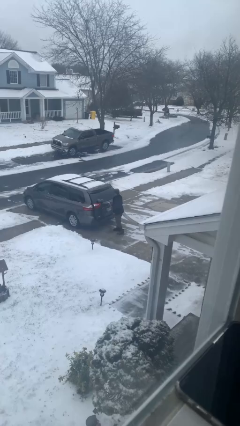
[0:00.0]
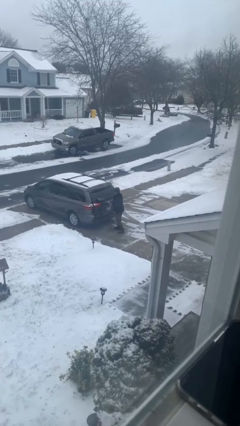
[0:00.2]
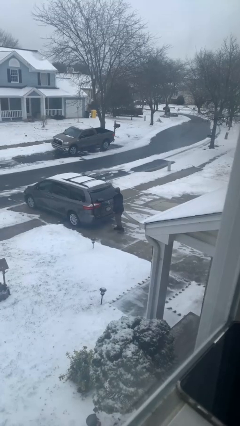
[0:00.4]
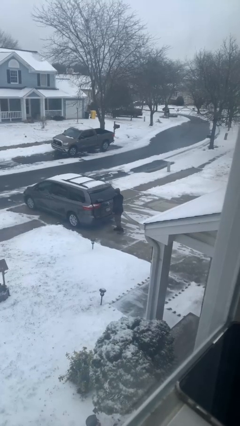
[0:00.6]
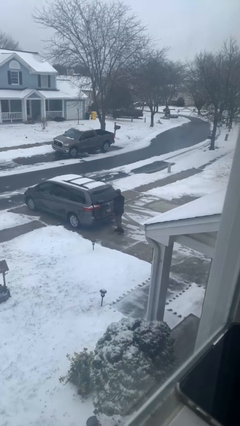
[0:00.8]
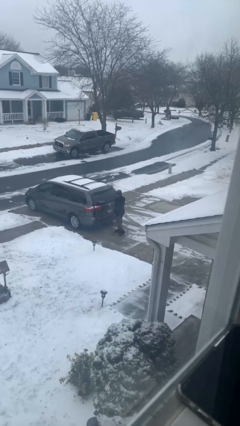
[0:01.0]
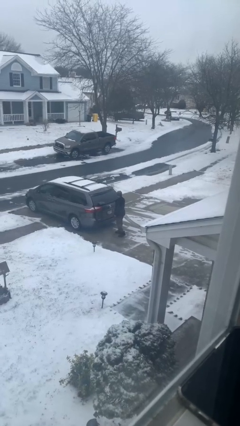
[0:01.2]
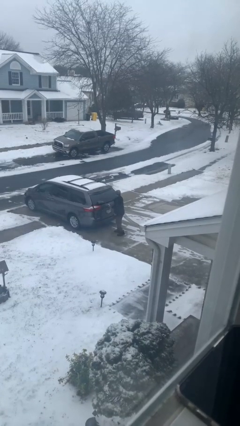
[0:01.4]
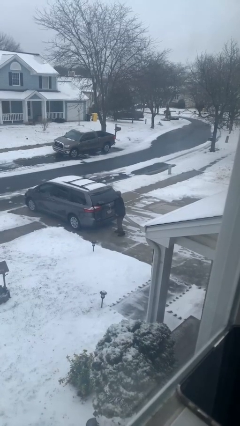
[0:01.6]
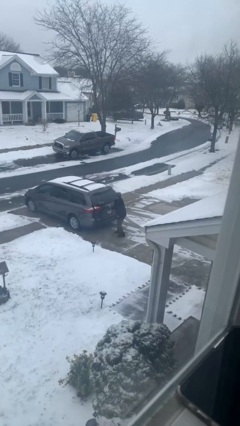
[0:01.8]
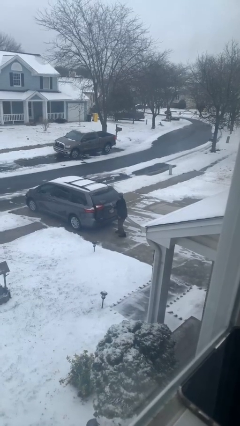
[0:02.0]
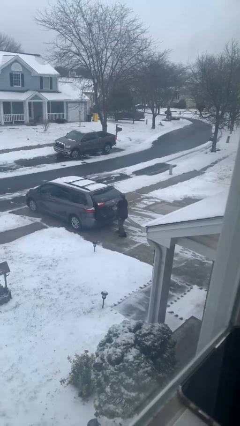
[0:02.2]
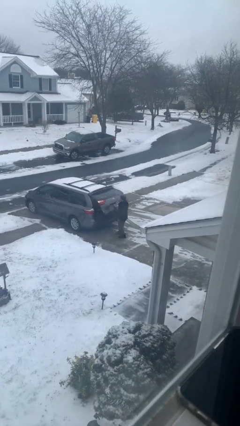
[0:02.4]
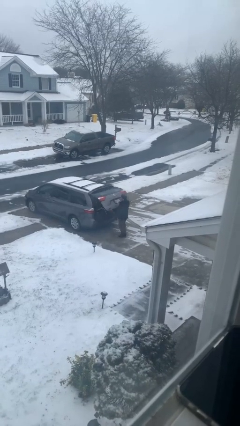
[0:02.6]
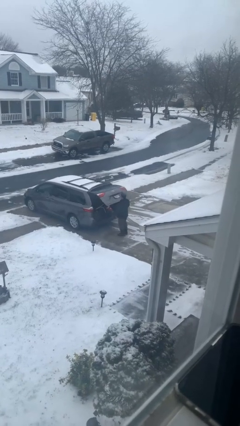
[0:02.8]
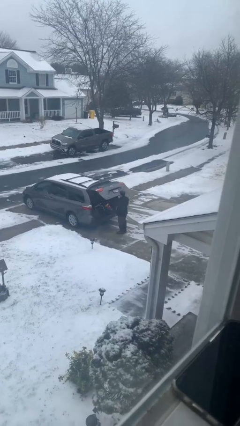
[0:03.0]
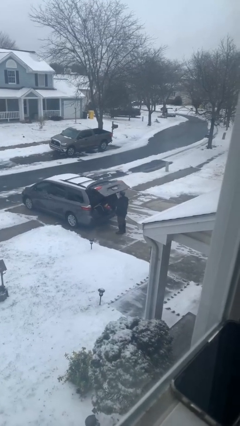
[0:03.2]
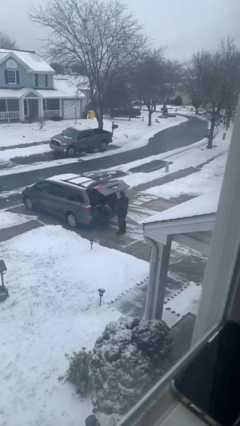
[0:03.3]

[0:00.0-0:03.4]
person opens car trunk

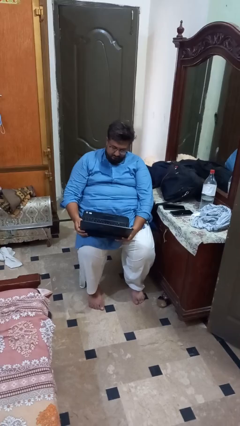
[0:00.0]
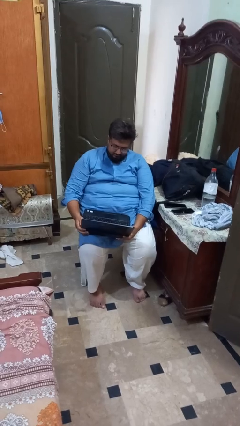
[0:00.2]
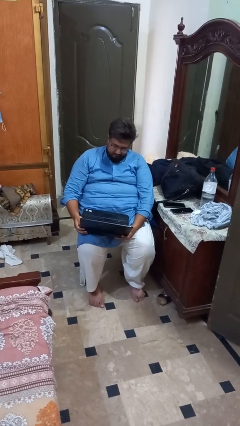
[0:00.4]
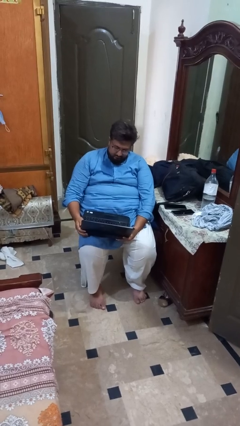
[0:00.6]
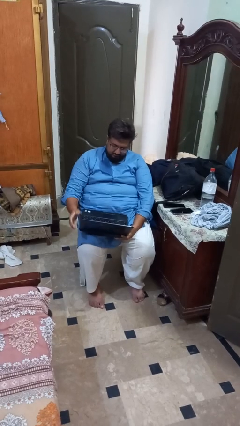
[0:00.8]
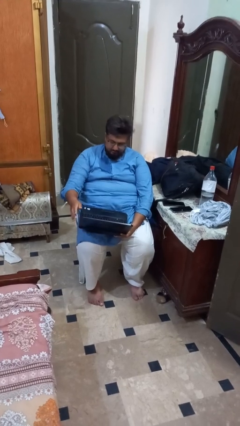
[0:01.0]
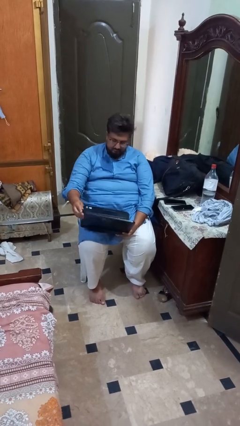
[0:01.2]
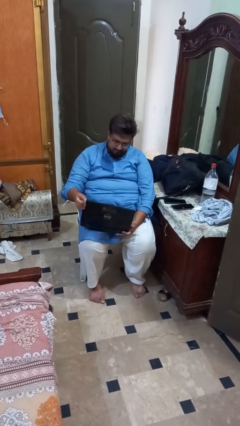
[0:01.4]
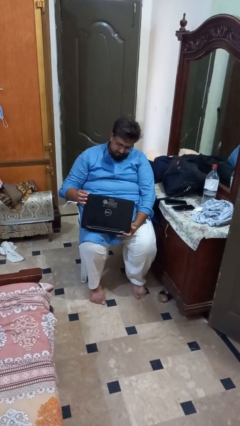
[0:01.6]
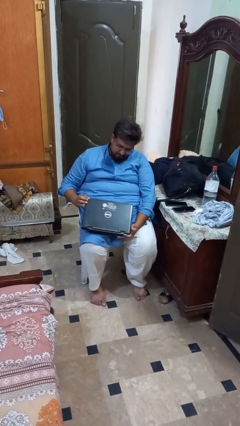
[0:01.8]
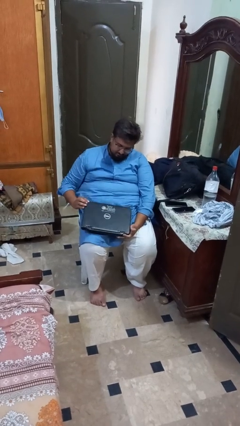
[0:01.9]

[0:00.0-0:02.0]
person closes laptop

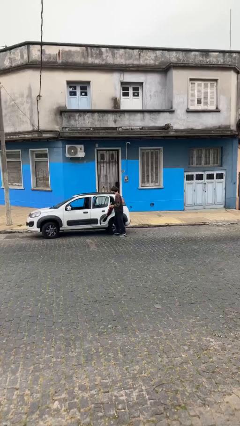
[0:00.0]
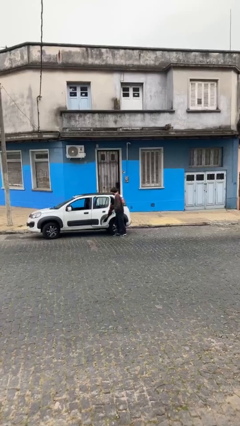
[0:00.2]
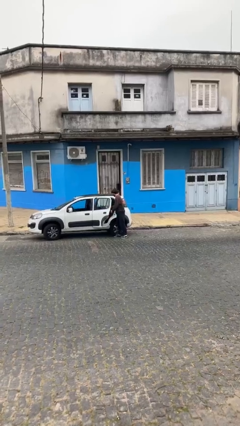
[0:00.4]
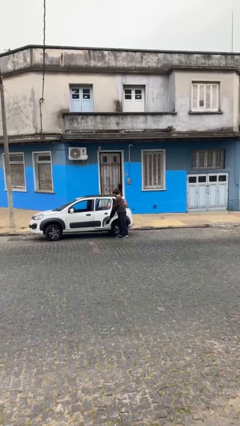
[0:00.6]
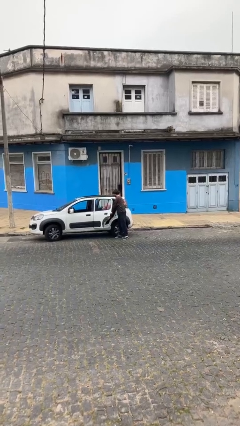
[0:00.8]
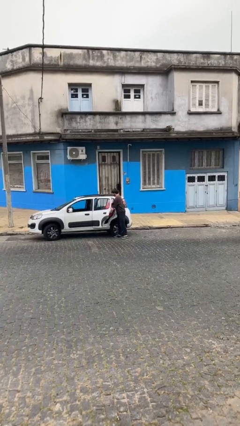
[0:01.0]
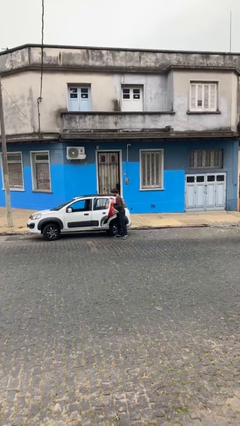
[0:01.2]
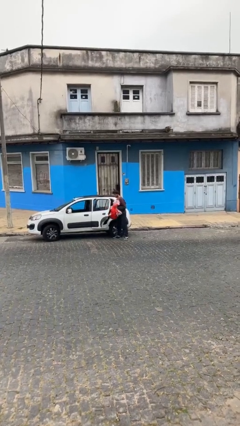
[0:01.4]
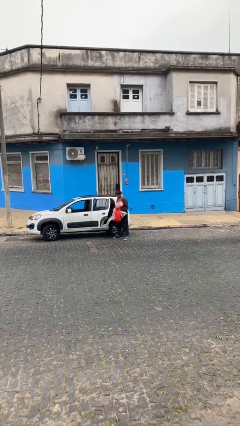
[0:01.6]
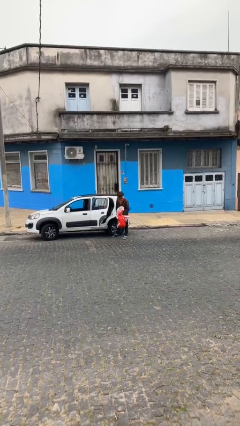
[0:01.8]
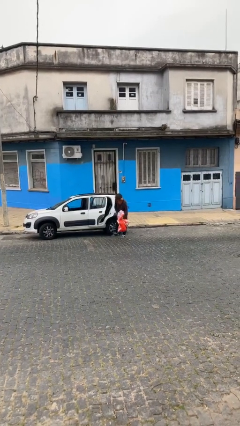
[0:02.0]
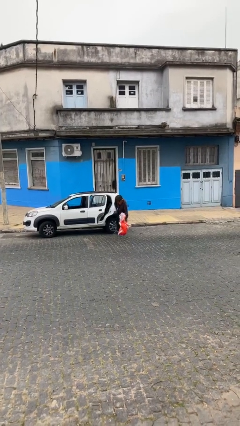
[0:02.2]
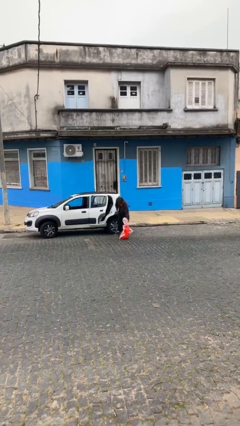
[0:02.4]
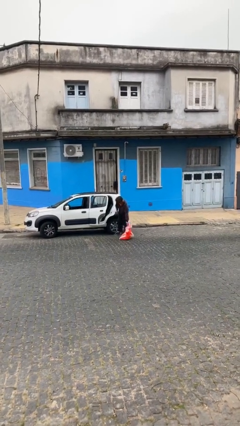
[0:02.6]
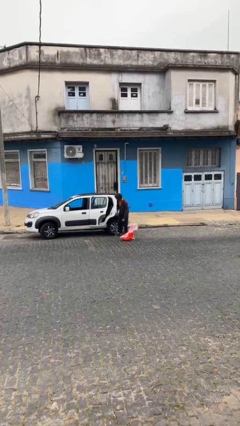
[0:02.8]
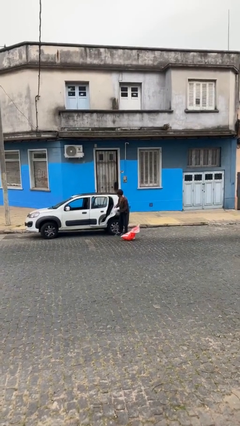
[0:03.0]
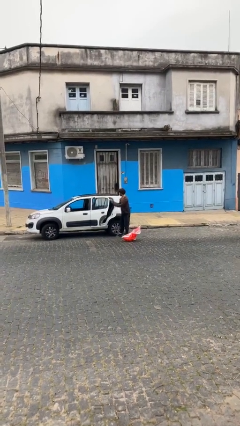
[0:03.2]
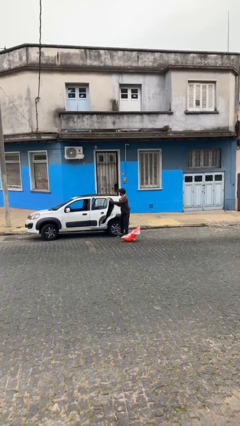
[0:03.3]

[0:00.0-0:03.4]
person unloads car

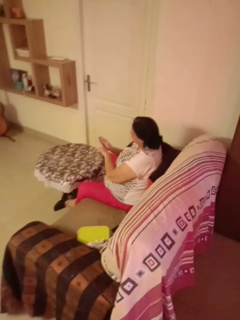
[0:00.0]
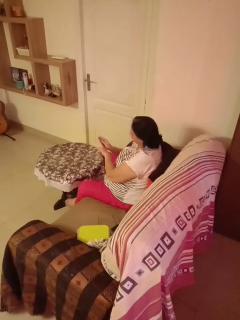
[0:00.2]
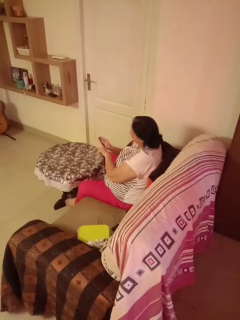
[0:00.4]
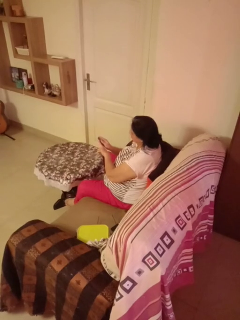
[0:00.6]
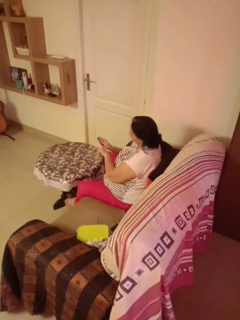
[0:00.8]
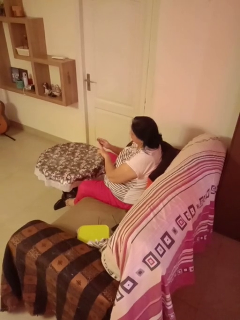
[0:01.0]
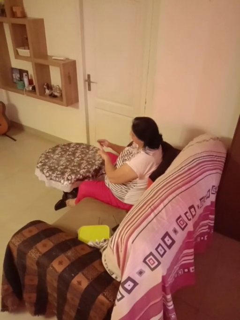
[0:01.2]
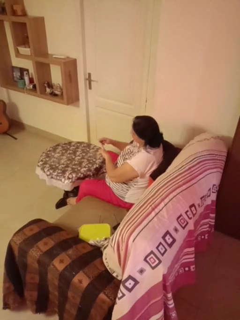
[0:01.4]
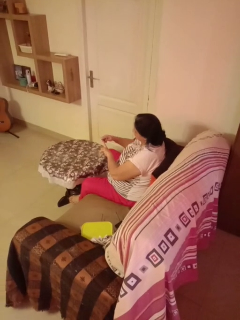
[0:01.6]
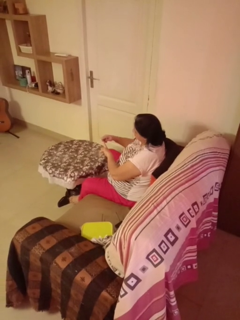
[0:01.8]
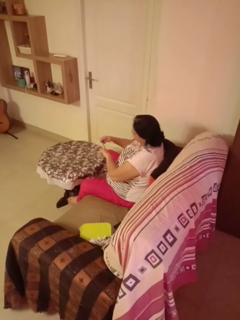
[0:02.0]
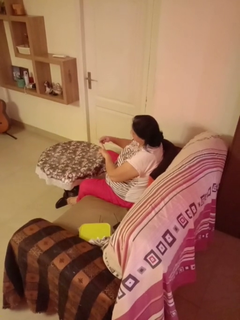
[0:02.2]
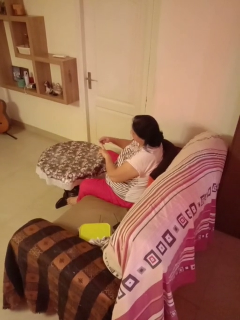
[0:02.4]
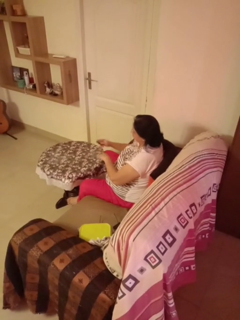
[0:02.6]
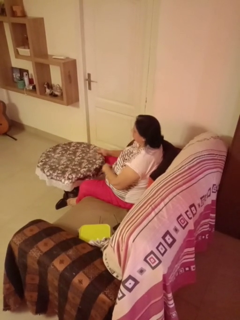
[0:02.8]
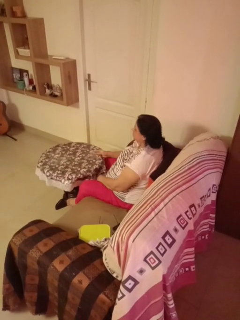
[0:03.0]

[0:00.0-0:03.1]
person files fingernails

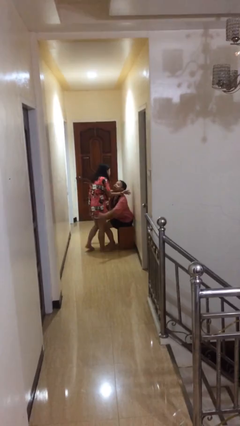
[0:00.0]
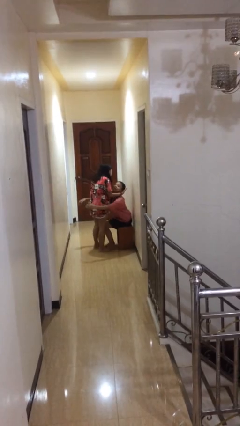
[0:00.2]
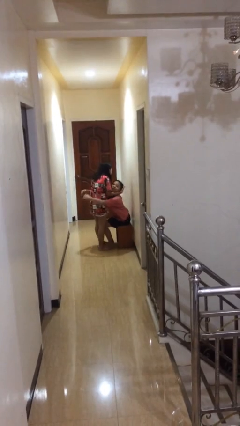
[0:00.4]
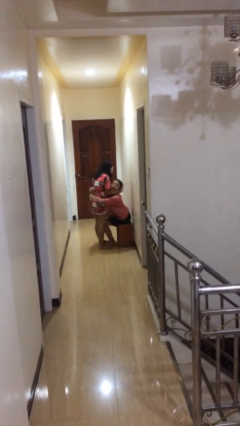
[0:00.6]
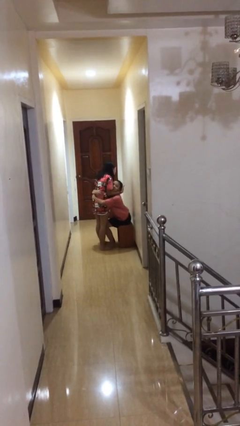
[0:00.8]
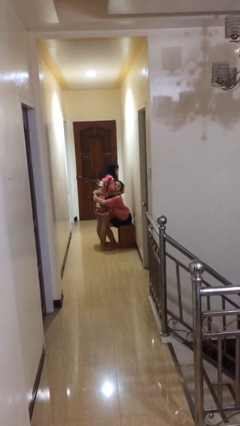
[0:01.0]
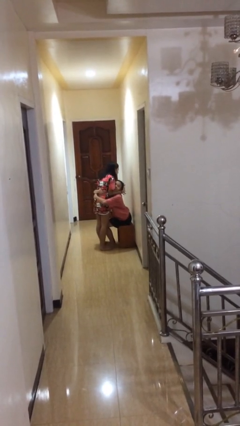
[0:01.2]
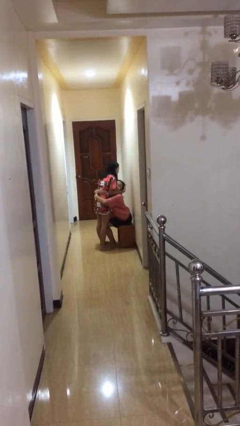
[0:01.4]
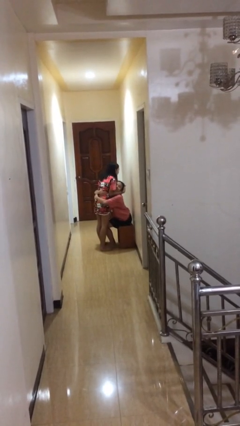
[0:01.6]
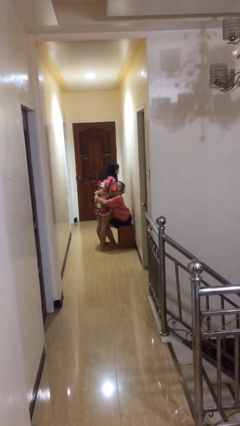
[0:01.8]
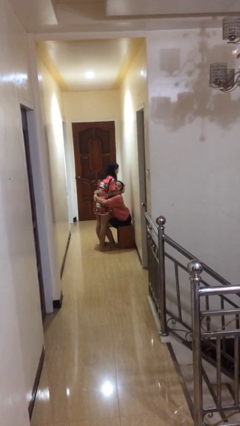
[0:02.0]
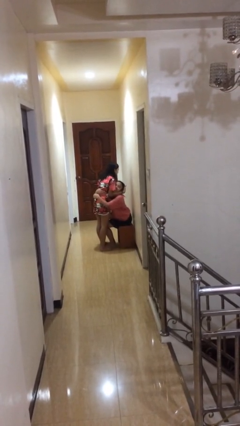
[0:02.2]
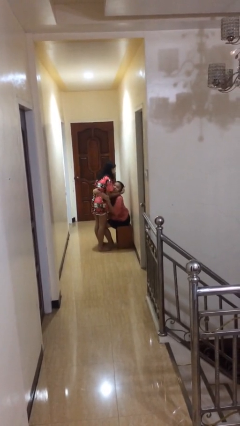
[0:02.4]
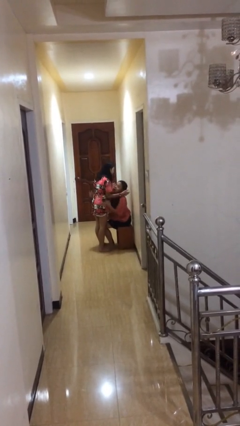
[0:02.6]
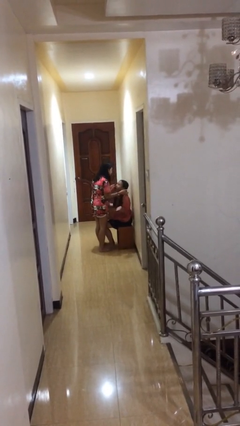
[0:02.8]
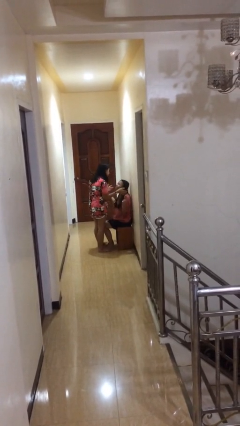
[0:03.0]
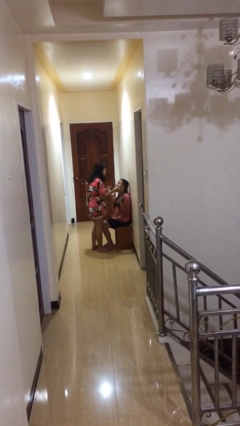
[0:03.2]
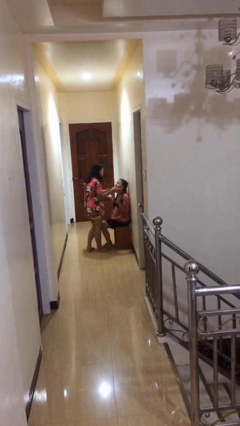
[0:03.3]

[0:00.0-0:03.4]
person embraces person

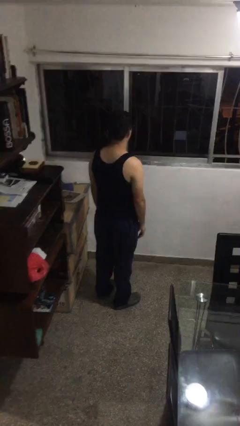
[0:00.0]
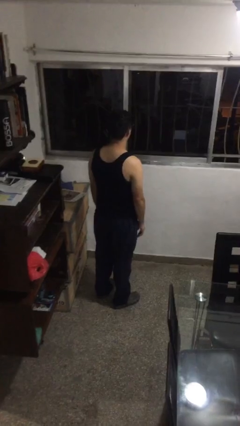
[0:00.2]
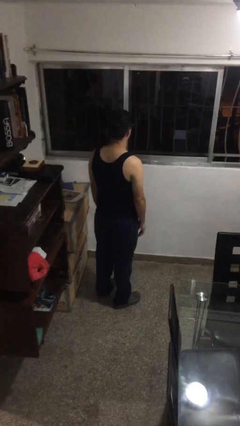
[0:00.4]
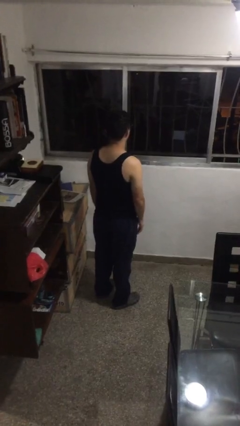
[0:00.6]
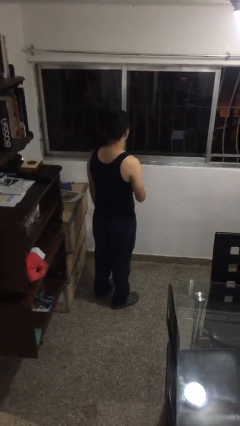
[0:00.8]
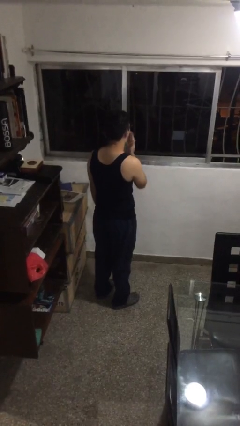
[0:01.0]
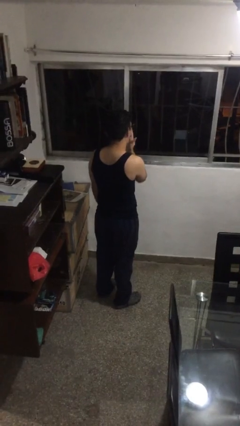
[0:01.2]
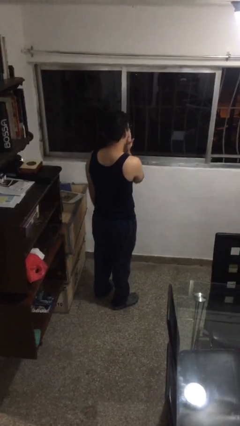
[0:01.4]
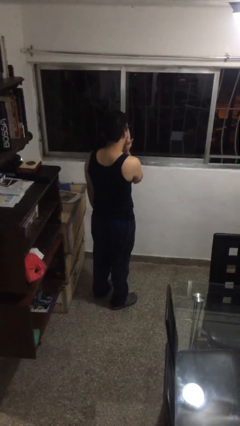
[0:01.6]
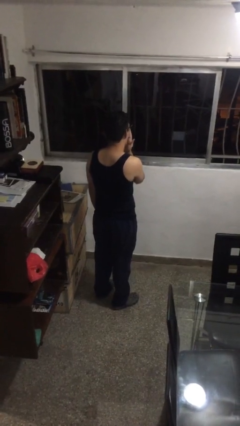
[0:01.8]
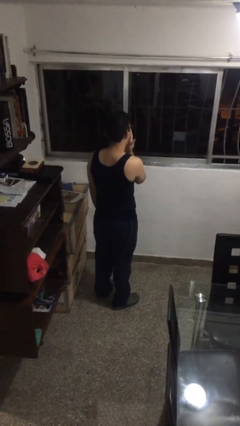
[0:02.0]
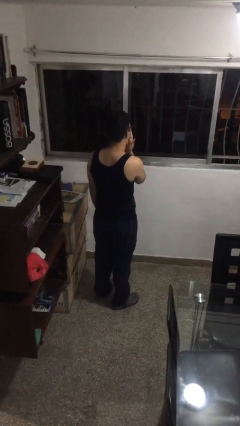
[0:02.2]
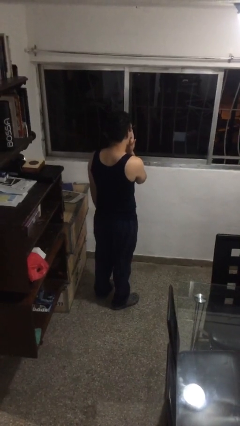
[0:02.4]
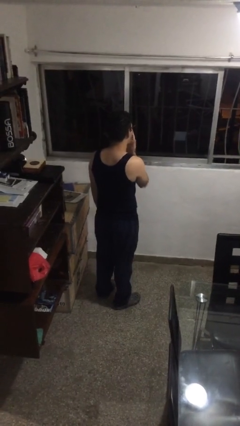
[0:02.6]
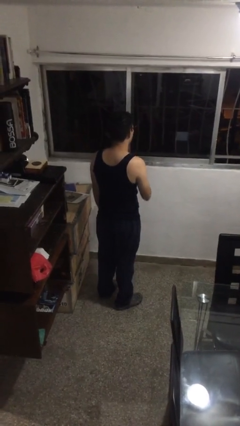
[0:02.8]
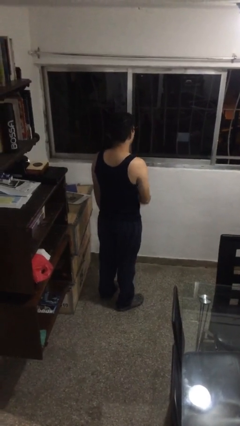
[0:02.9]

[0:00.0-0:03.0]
person yawns
